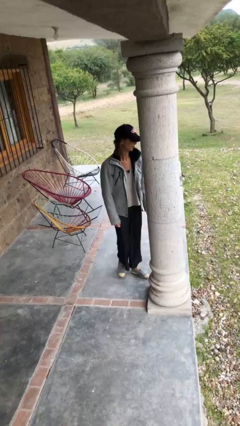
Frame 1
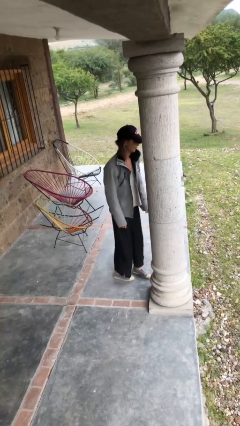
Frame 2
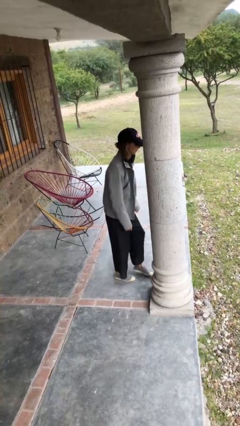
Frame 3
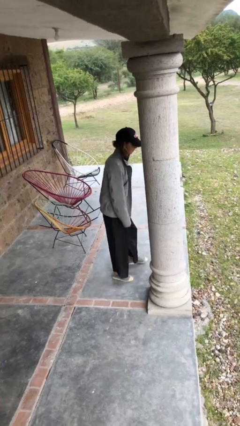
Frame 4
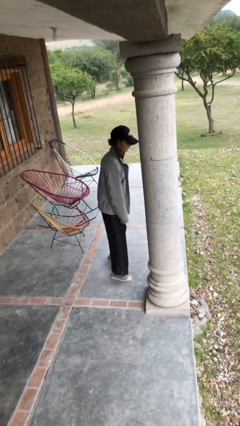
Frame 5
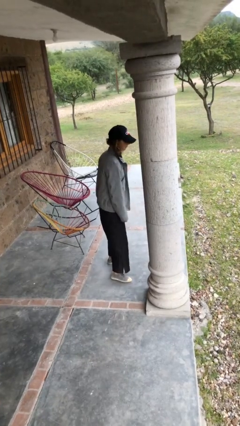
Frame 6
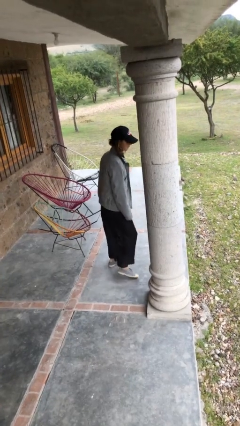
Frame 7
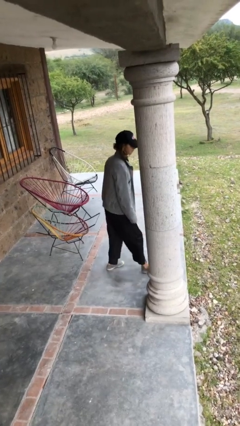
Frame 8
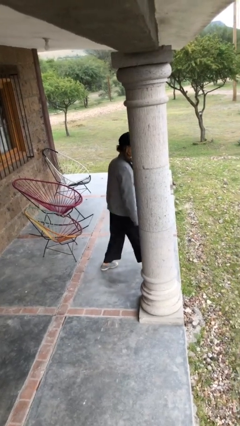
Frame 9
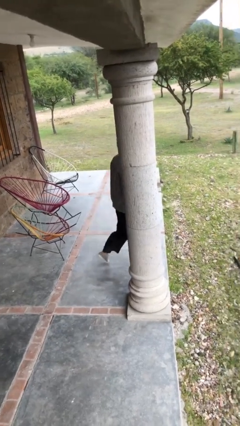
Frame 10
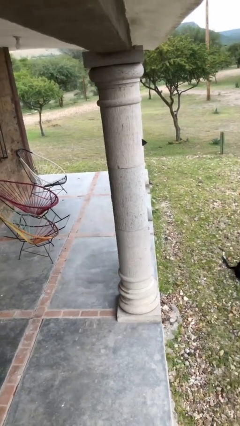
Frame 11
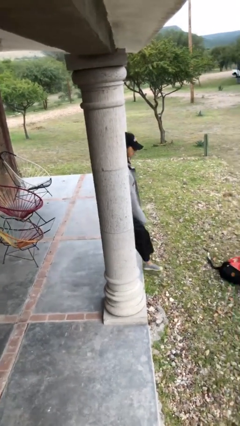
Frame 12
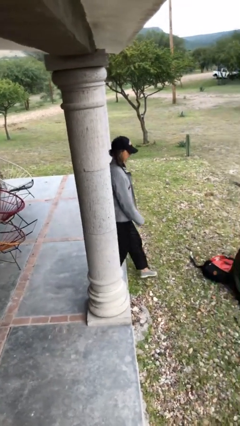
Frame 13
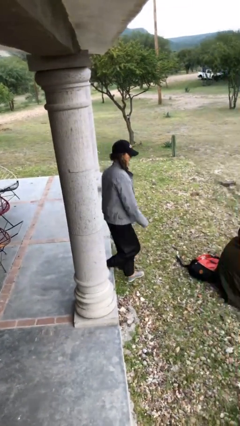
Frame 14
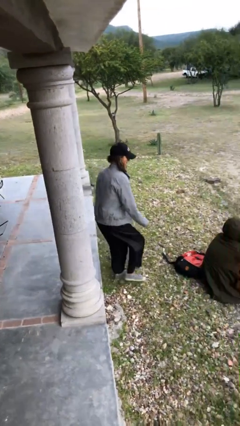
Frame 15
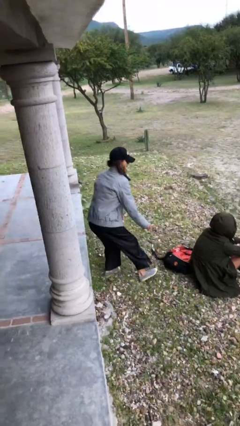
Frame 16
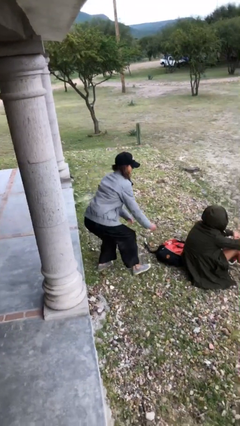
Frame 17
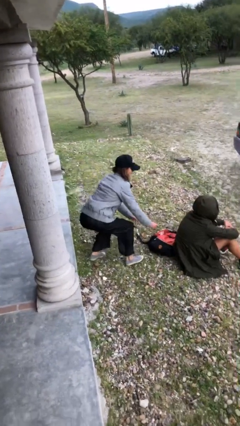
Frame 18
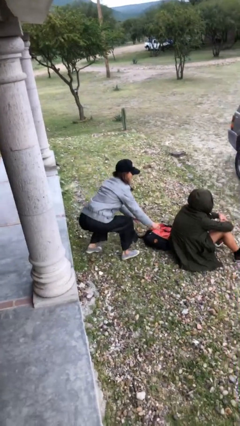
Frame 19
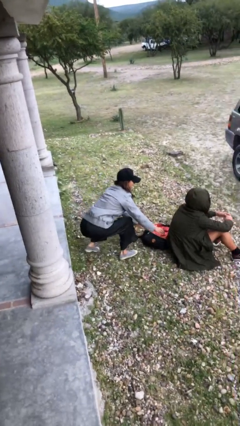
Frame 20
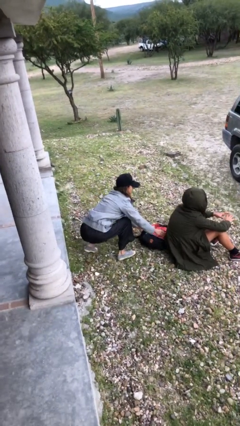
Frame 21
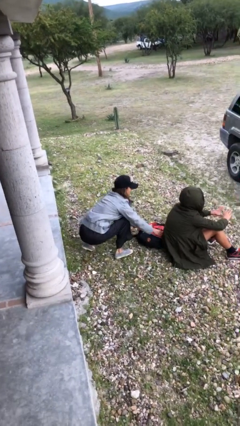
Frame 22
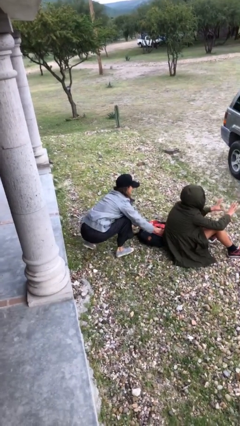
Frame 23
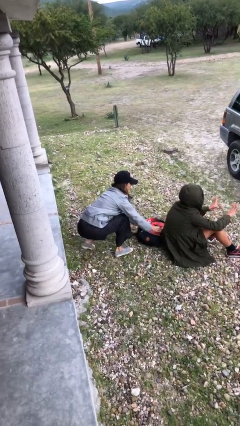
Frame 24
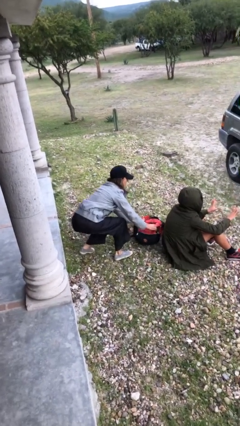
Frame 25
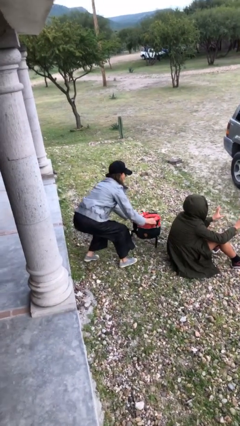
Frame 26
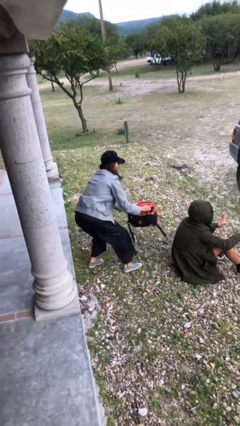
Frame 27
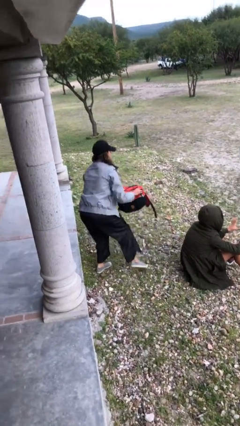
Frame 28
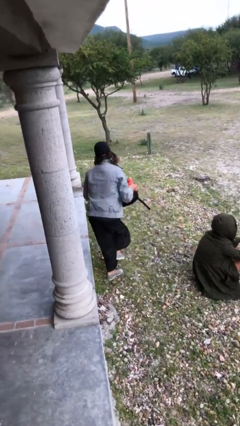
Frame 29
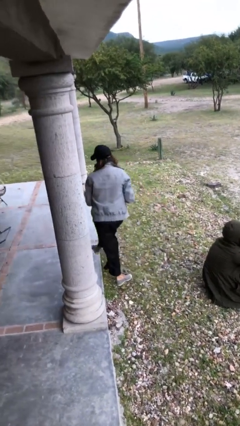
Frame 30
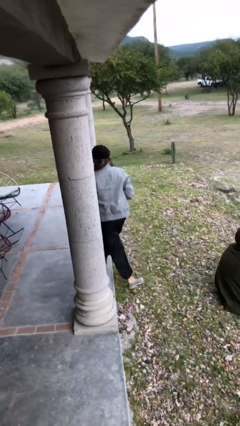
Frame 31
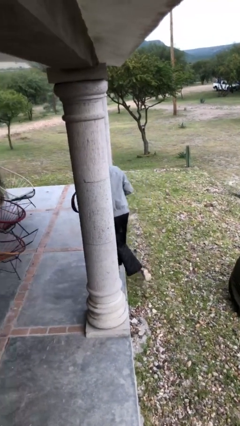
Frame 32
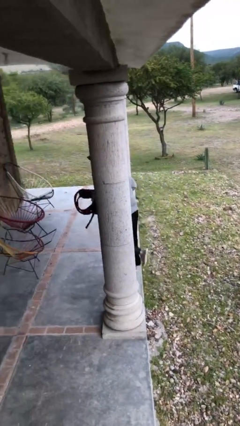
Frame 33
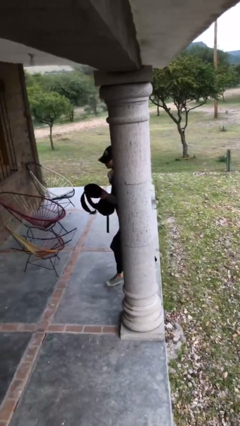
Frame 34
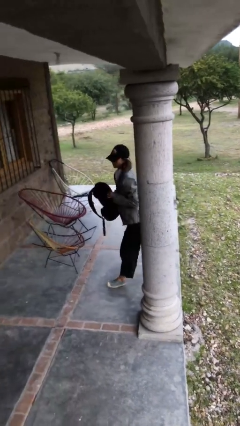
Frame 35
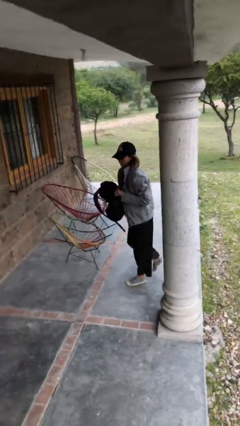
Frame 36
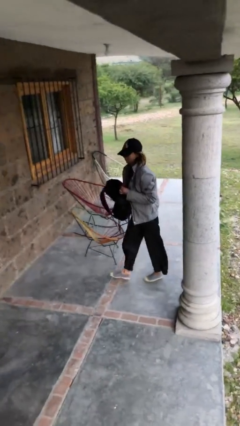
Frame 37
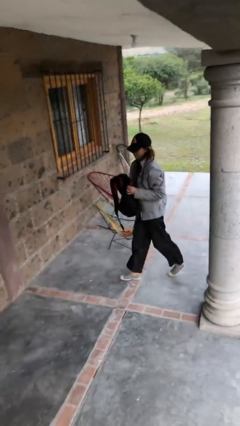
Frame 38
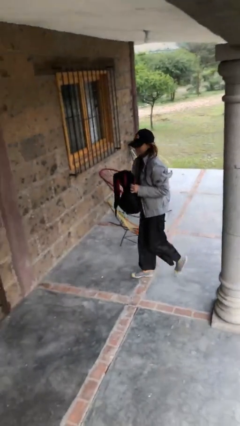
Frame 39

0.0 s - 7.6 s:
person steals object from person

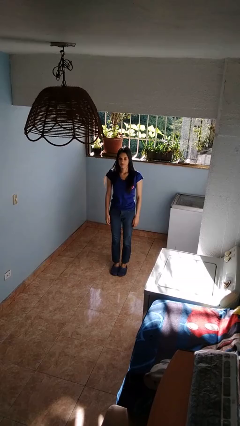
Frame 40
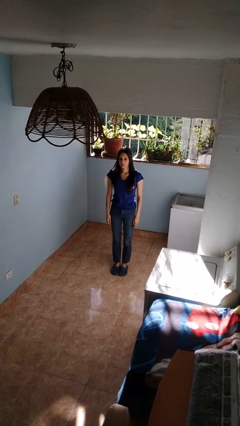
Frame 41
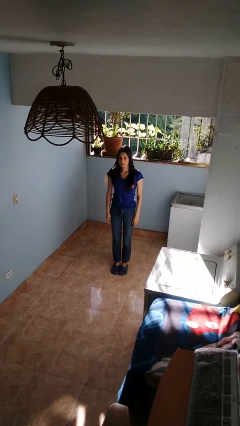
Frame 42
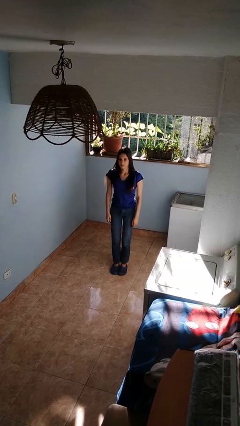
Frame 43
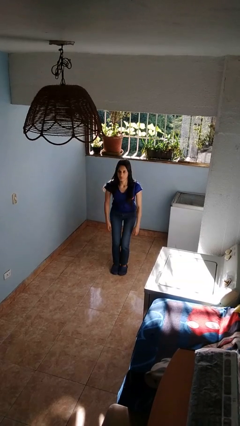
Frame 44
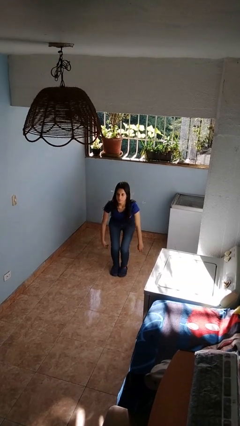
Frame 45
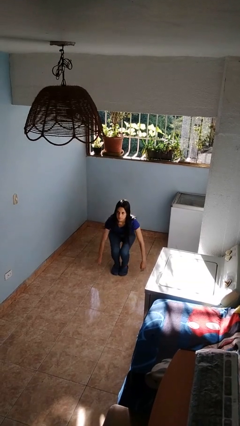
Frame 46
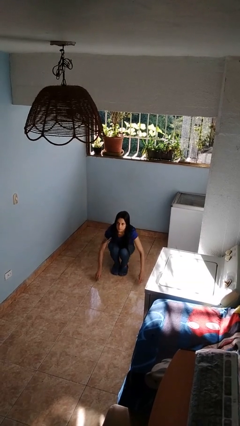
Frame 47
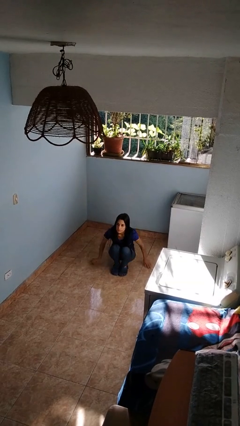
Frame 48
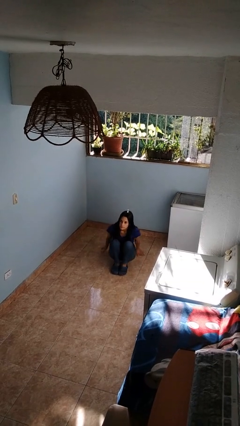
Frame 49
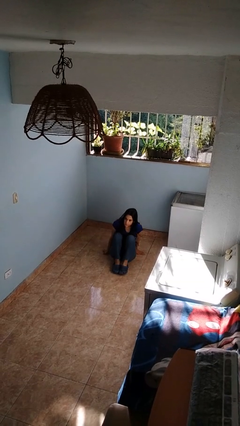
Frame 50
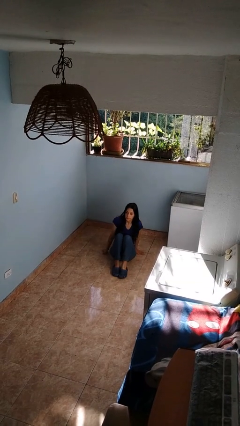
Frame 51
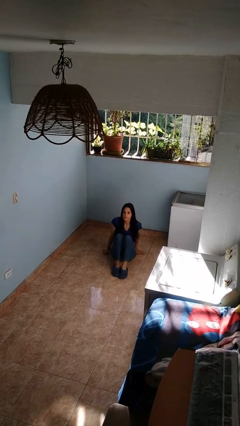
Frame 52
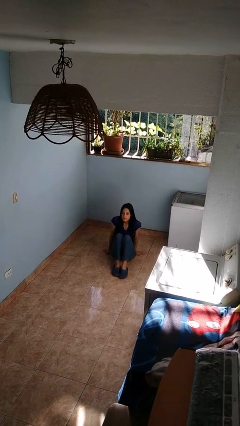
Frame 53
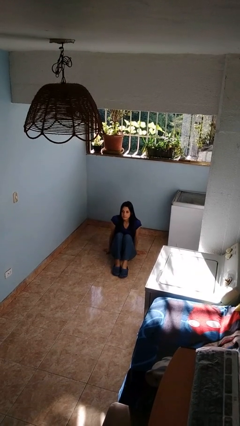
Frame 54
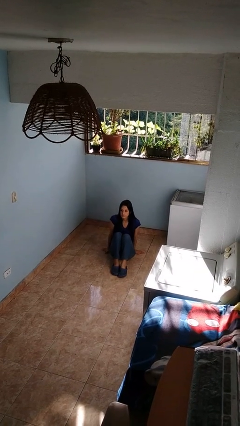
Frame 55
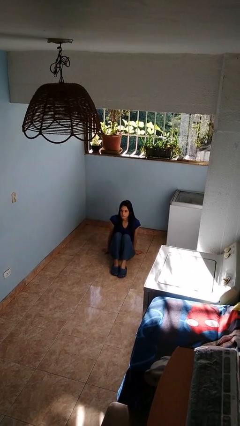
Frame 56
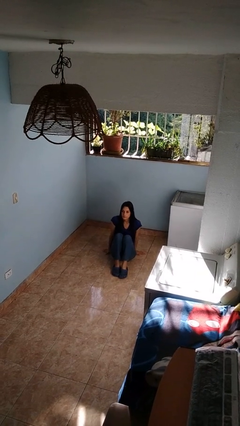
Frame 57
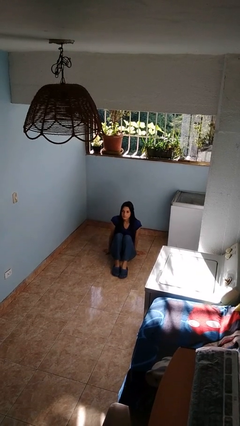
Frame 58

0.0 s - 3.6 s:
person sits crisscross

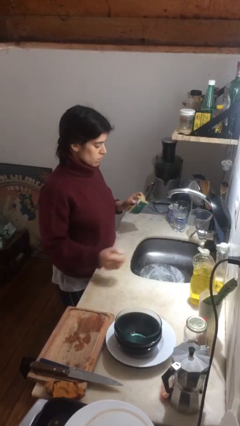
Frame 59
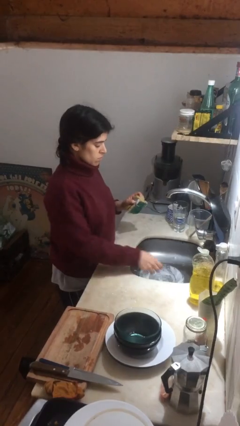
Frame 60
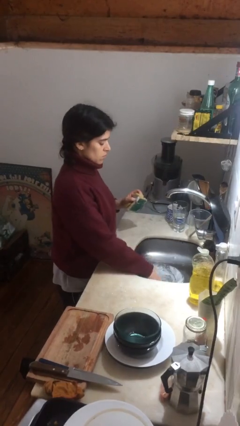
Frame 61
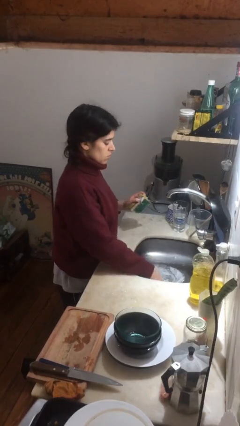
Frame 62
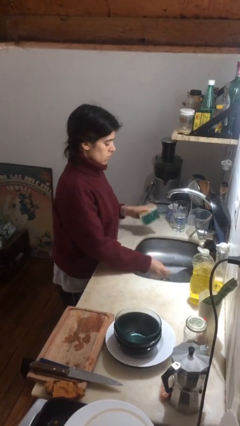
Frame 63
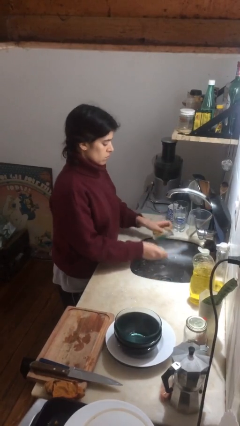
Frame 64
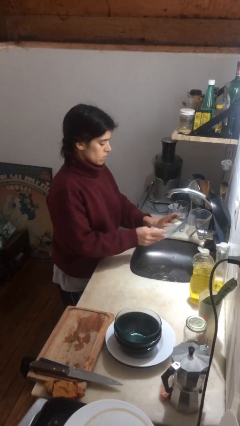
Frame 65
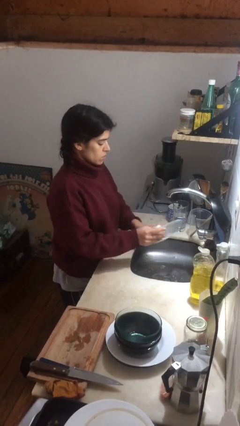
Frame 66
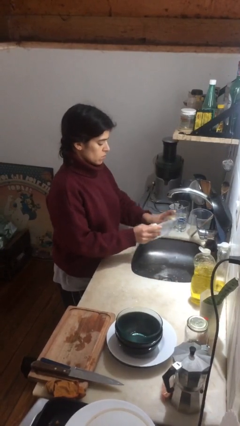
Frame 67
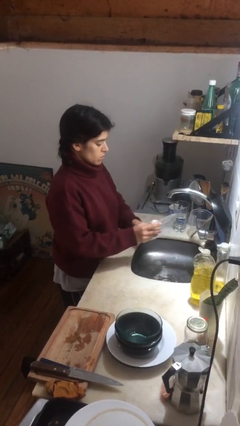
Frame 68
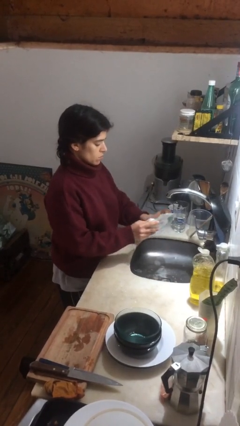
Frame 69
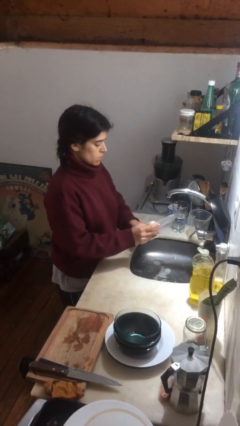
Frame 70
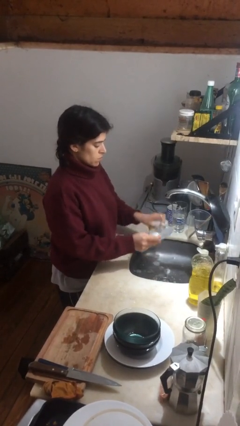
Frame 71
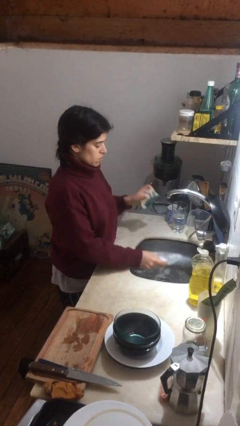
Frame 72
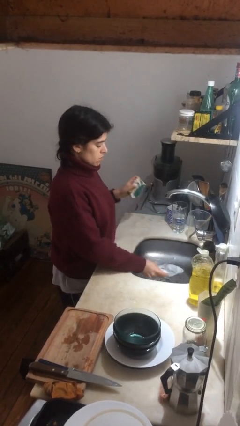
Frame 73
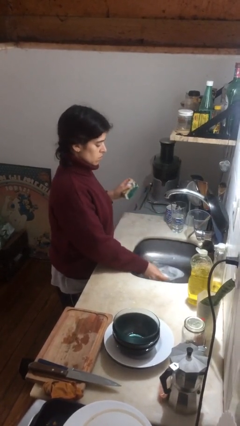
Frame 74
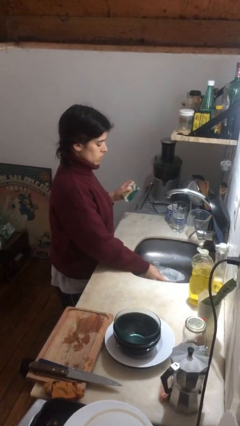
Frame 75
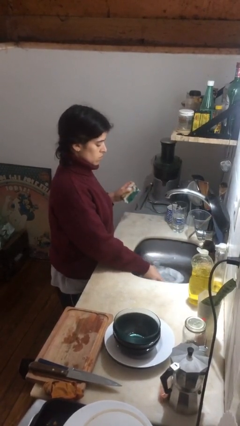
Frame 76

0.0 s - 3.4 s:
person washes dish

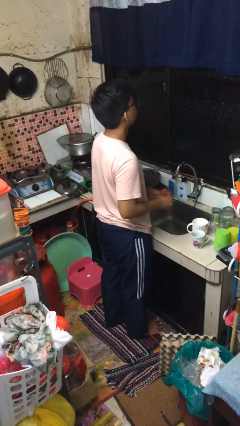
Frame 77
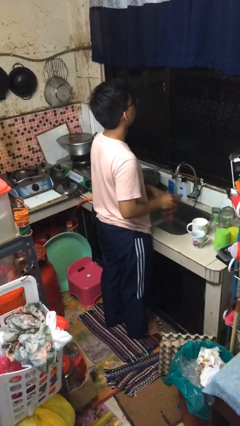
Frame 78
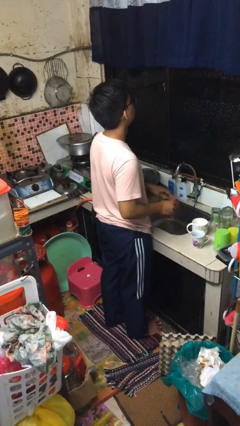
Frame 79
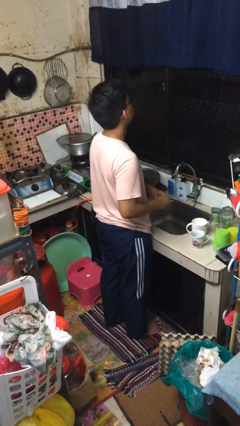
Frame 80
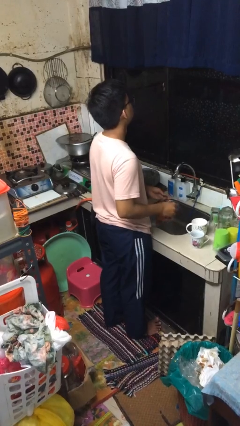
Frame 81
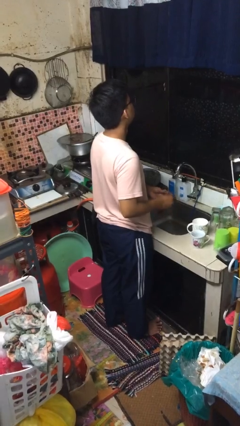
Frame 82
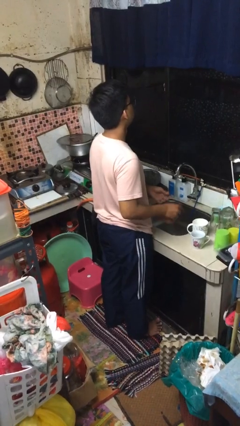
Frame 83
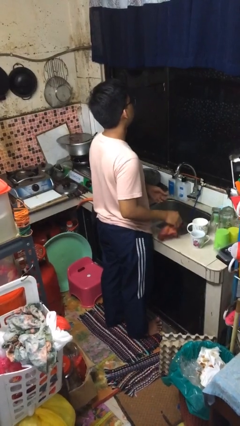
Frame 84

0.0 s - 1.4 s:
person dries hands with towel

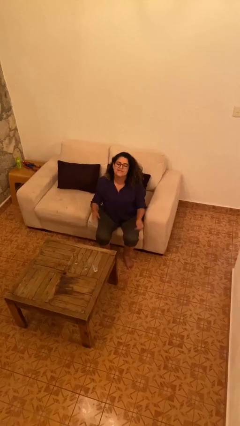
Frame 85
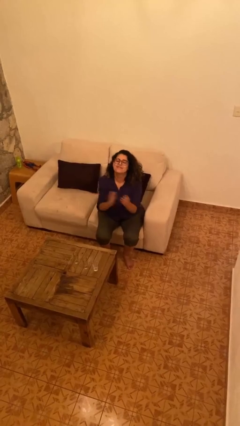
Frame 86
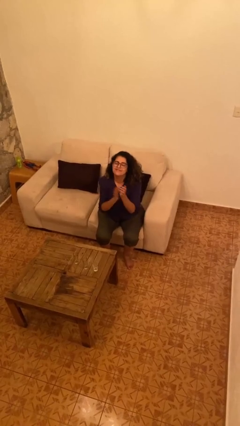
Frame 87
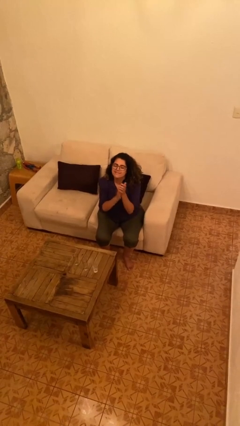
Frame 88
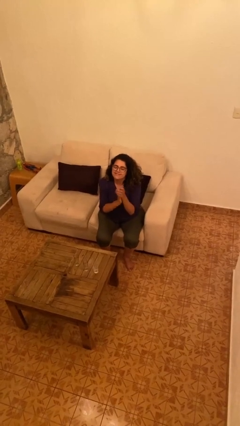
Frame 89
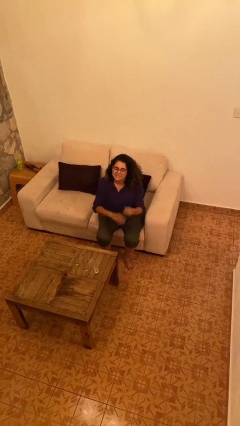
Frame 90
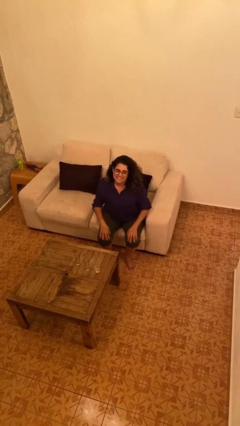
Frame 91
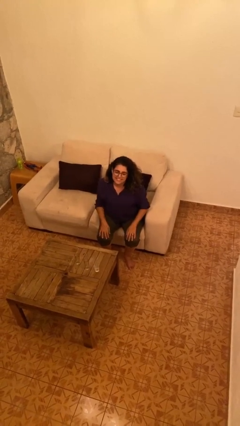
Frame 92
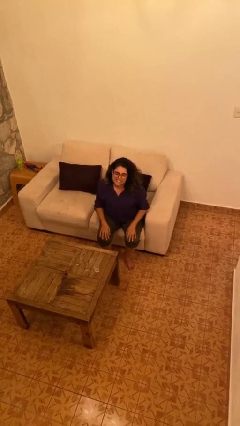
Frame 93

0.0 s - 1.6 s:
person claps hands
